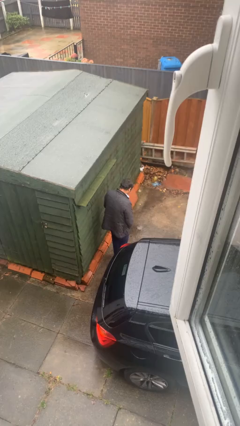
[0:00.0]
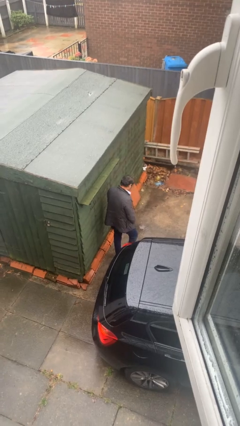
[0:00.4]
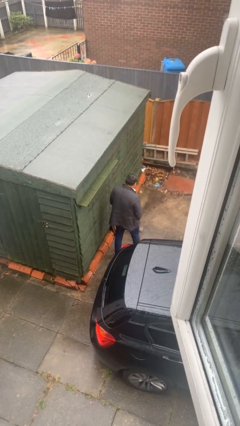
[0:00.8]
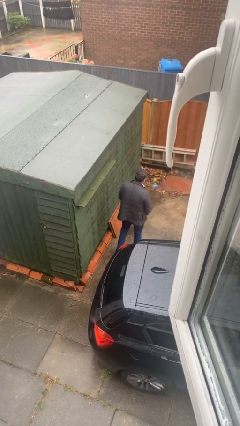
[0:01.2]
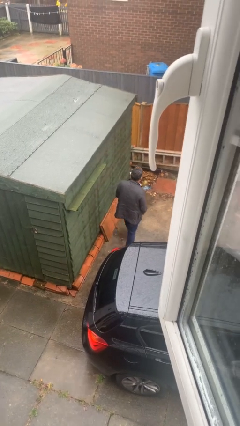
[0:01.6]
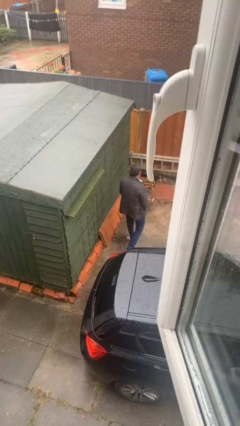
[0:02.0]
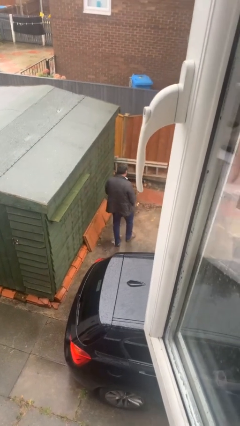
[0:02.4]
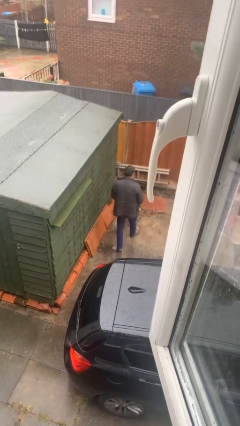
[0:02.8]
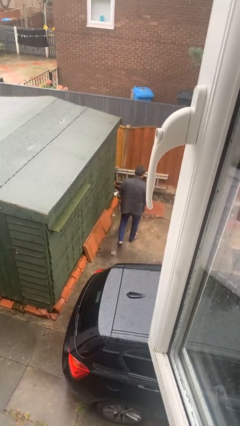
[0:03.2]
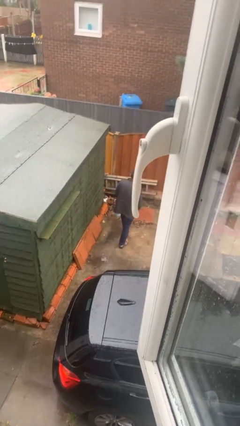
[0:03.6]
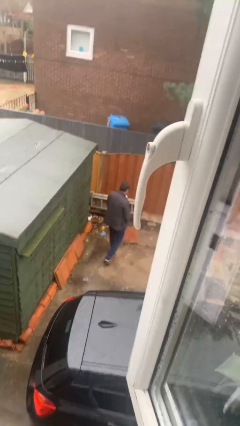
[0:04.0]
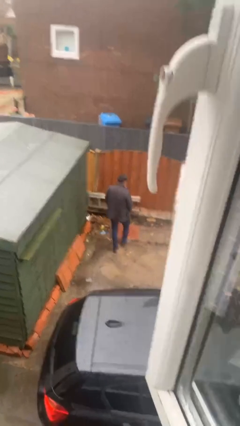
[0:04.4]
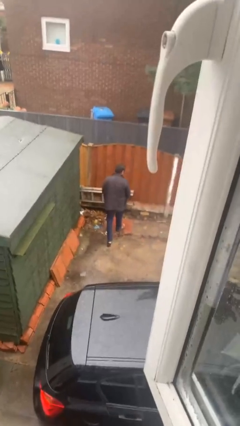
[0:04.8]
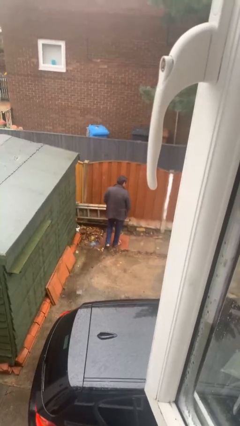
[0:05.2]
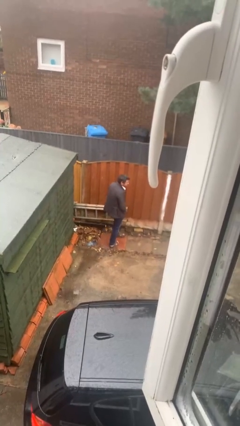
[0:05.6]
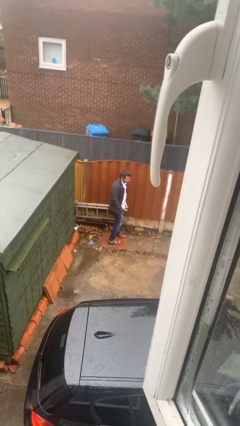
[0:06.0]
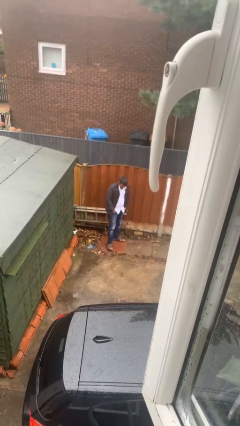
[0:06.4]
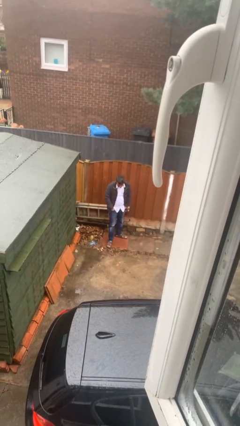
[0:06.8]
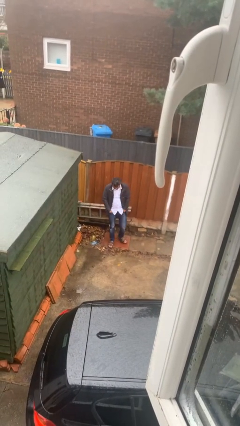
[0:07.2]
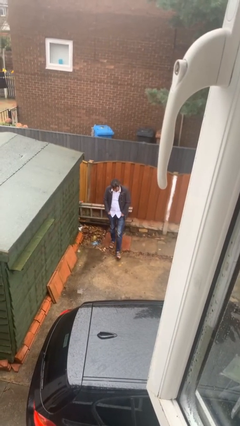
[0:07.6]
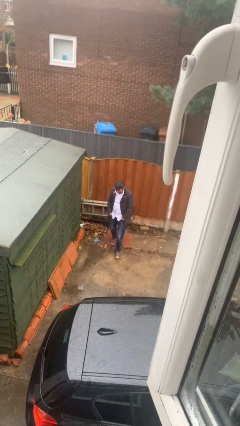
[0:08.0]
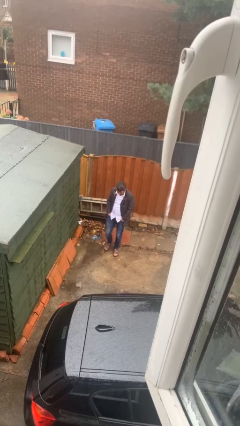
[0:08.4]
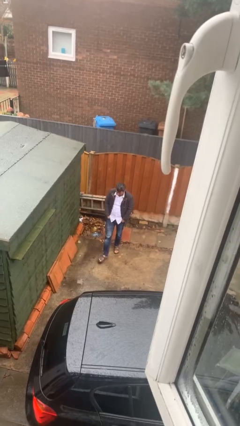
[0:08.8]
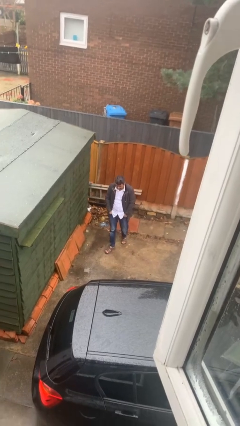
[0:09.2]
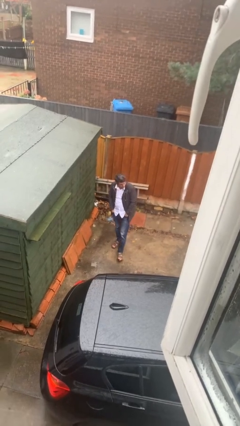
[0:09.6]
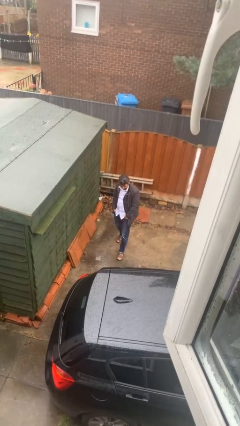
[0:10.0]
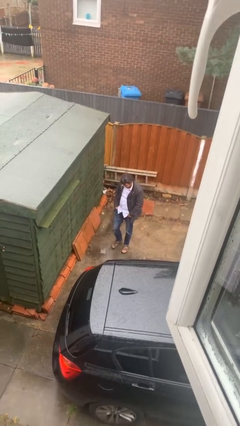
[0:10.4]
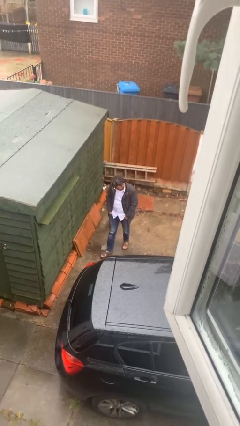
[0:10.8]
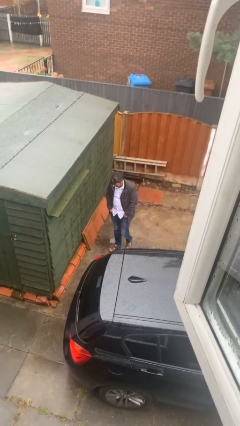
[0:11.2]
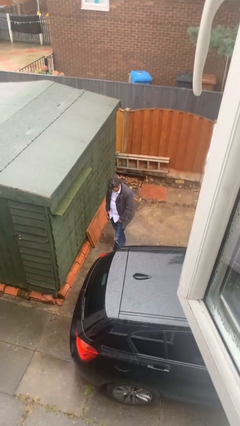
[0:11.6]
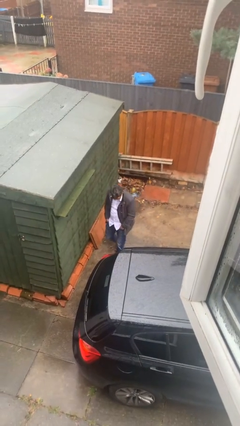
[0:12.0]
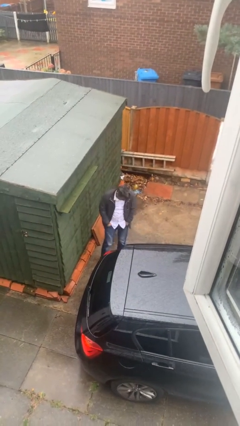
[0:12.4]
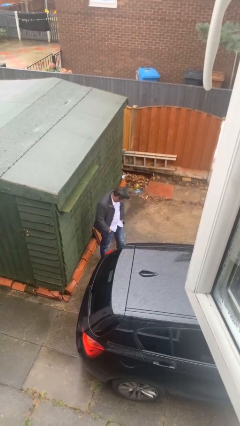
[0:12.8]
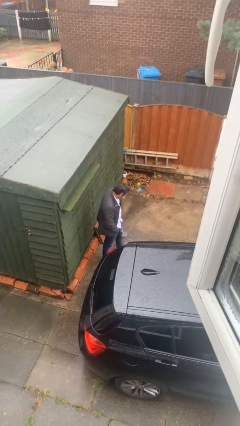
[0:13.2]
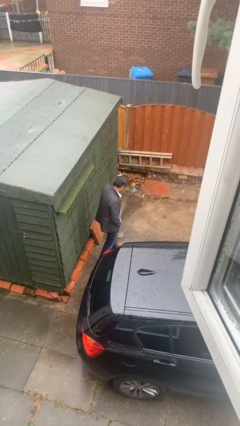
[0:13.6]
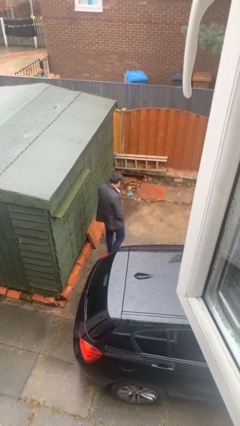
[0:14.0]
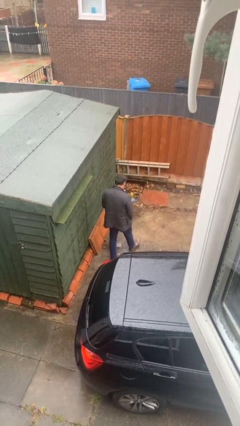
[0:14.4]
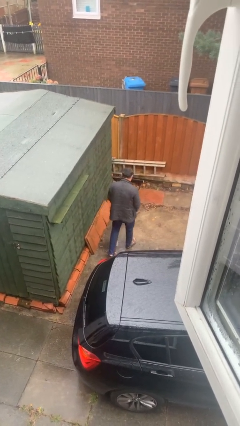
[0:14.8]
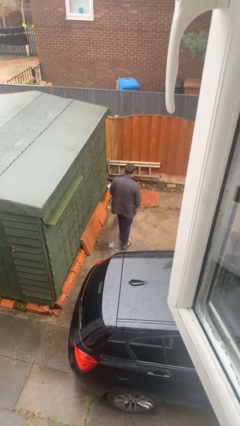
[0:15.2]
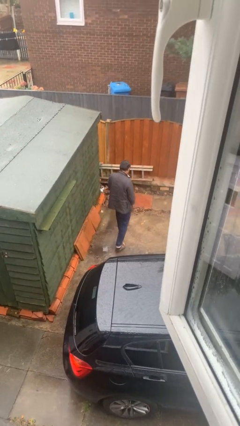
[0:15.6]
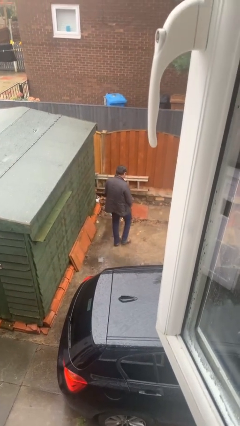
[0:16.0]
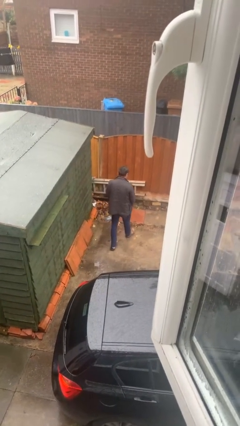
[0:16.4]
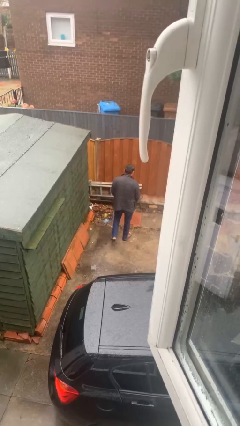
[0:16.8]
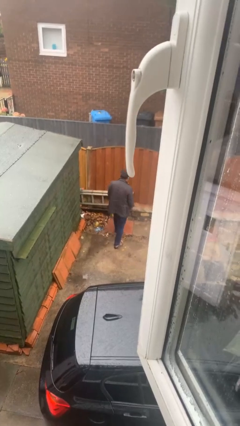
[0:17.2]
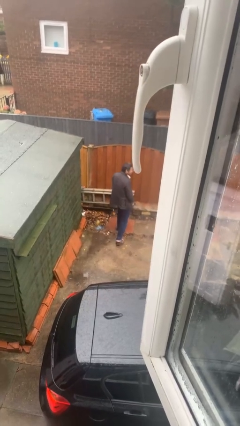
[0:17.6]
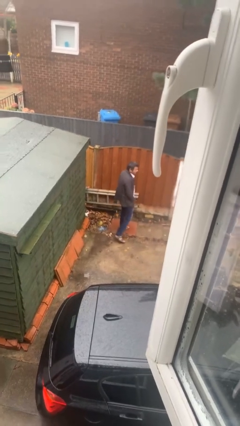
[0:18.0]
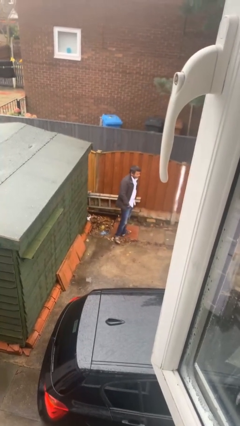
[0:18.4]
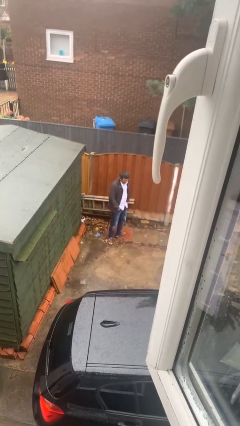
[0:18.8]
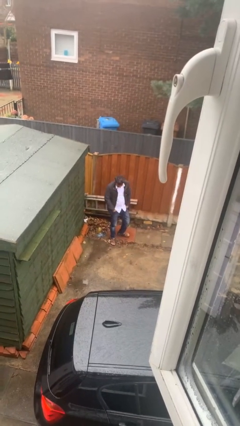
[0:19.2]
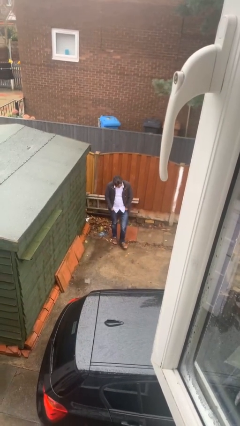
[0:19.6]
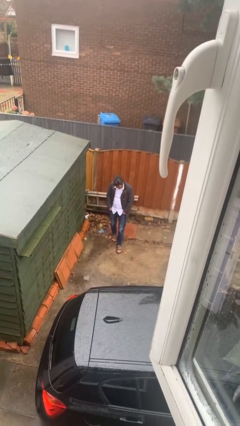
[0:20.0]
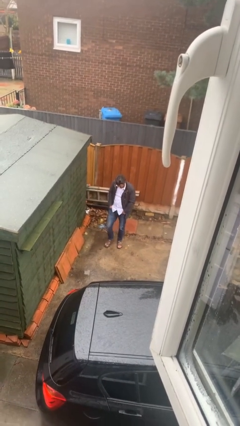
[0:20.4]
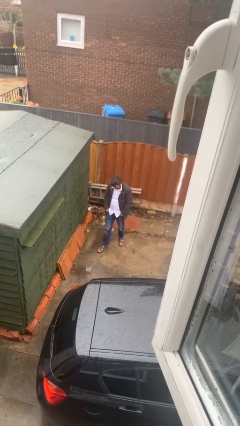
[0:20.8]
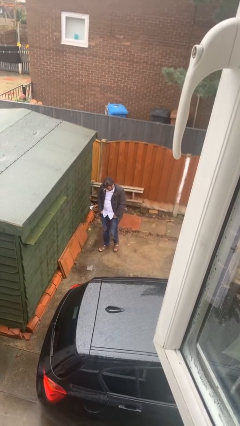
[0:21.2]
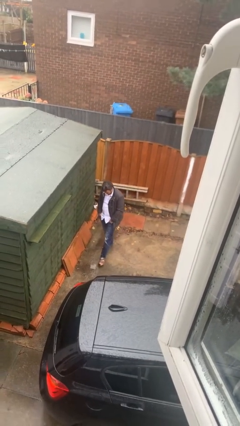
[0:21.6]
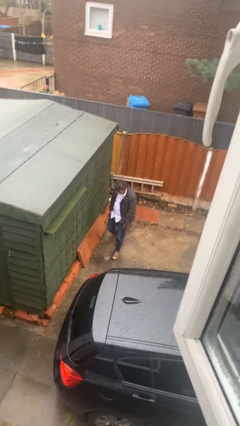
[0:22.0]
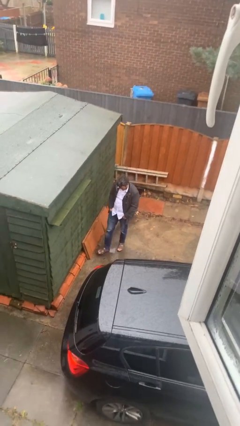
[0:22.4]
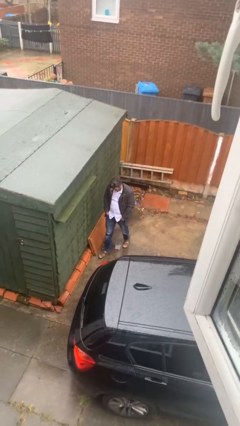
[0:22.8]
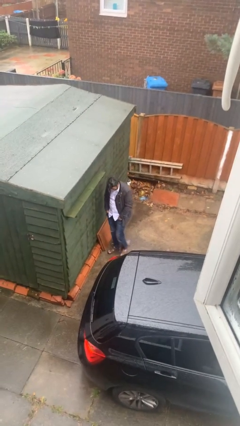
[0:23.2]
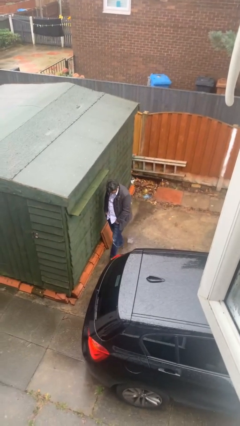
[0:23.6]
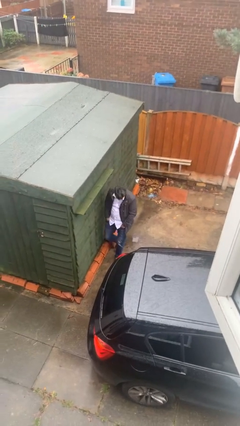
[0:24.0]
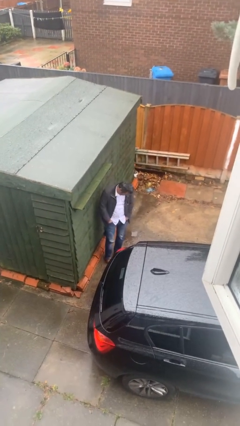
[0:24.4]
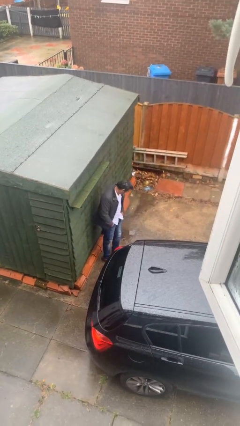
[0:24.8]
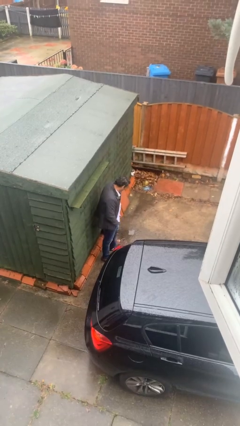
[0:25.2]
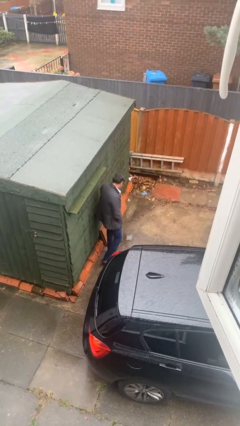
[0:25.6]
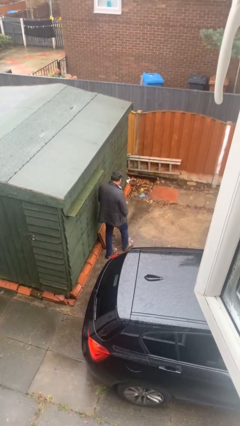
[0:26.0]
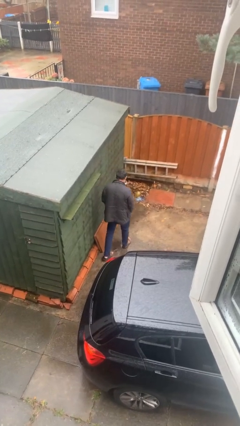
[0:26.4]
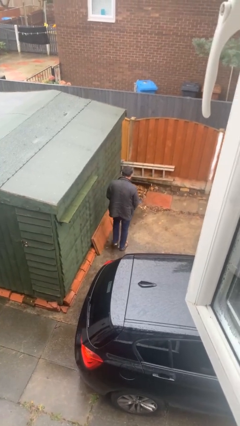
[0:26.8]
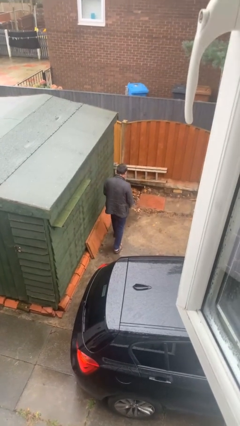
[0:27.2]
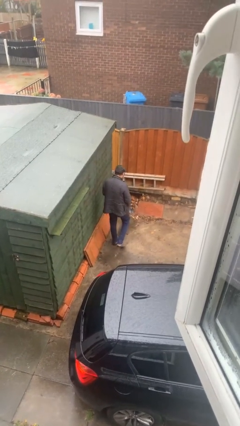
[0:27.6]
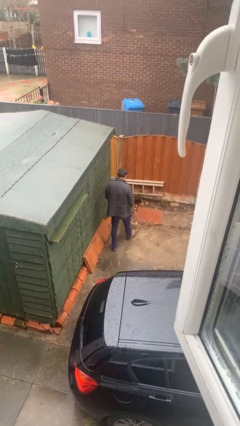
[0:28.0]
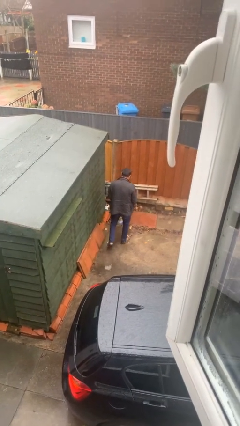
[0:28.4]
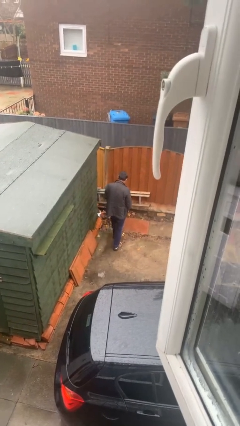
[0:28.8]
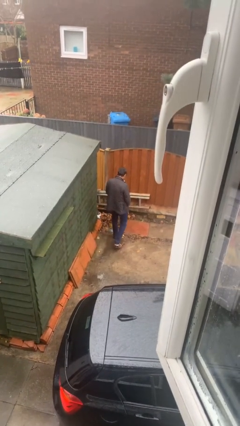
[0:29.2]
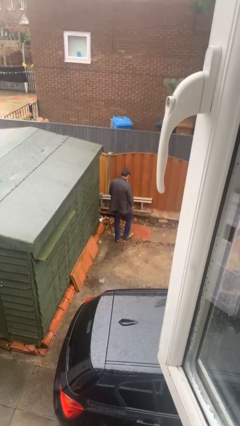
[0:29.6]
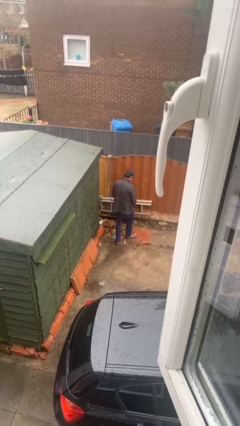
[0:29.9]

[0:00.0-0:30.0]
person walks

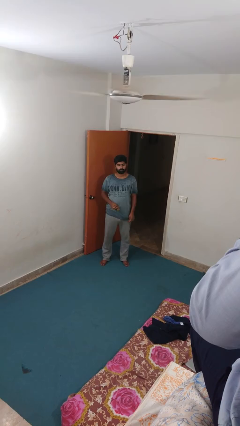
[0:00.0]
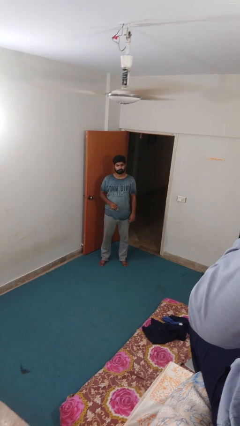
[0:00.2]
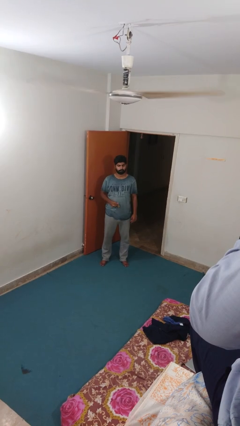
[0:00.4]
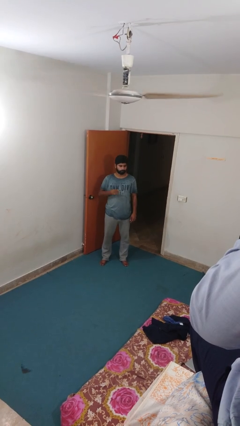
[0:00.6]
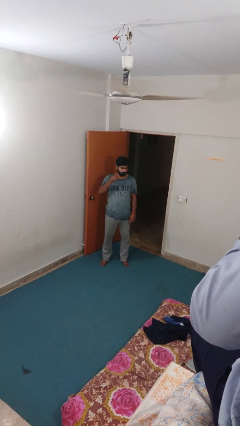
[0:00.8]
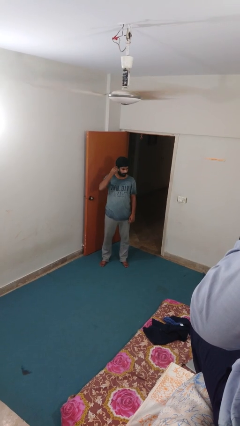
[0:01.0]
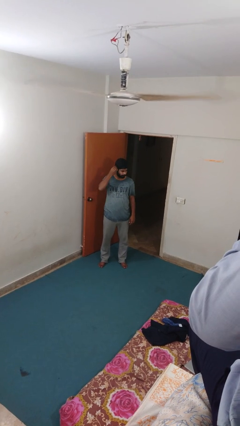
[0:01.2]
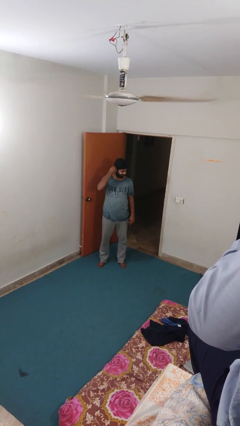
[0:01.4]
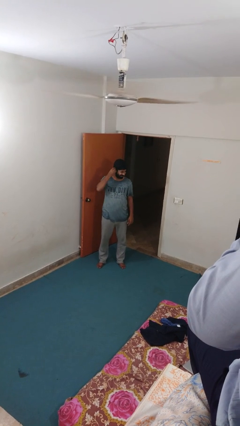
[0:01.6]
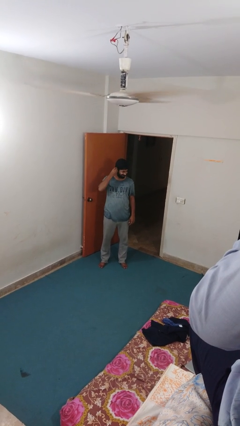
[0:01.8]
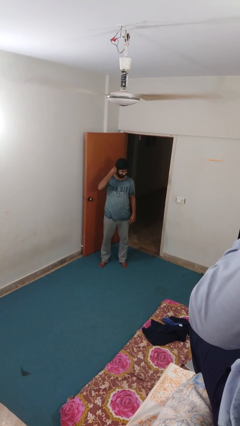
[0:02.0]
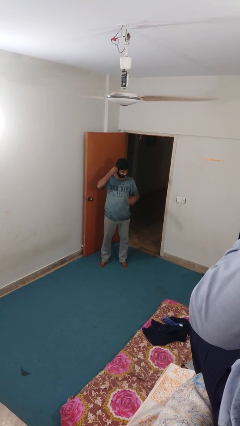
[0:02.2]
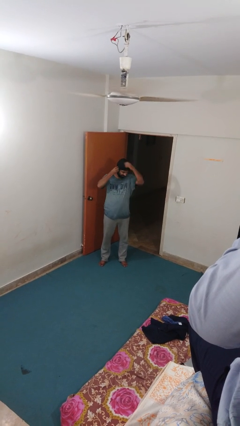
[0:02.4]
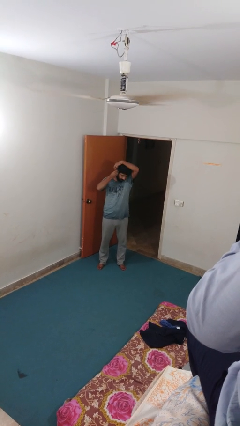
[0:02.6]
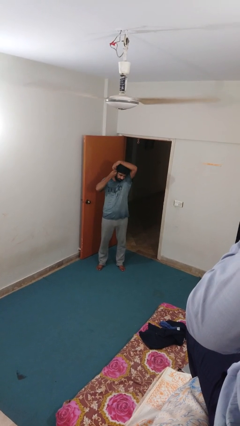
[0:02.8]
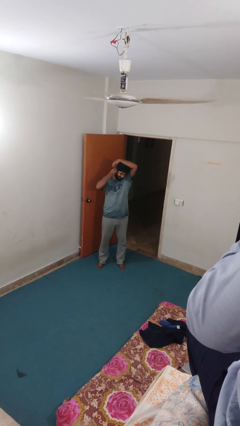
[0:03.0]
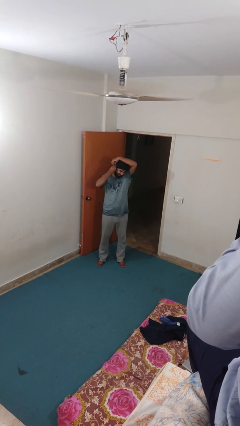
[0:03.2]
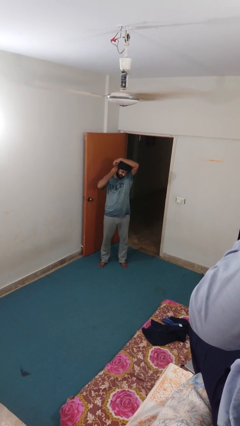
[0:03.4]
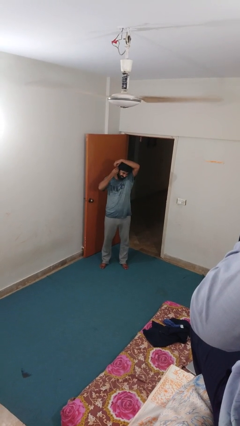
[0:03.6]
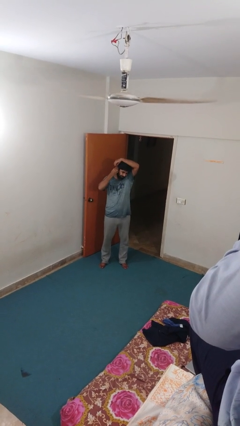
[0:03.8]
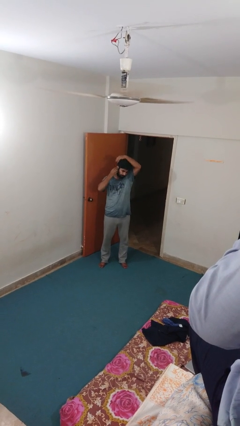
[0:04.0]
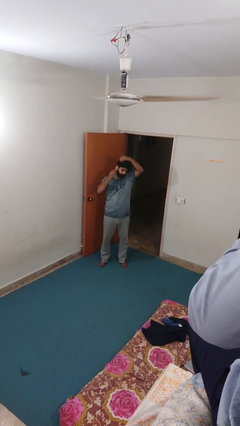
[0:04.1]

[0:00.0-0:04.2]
person puts on earrings
